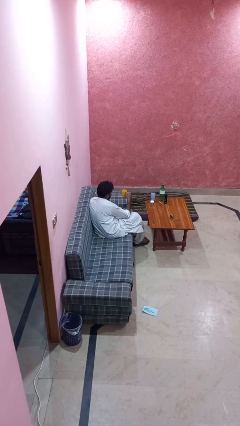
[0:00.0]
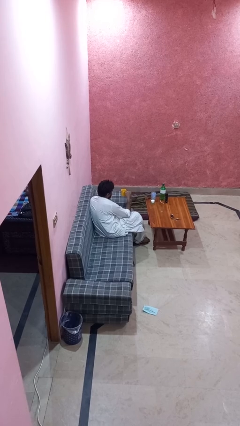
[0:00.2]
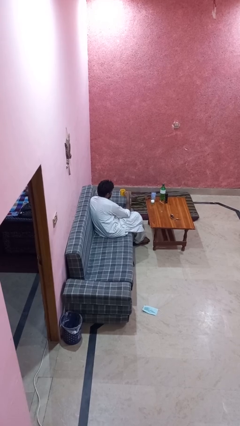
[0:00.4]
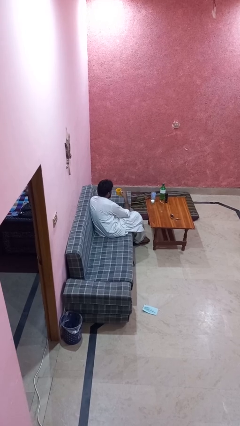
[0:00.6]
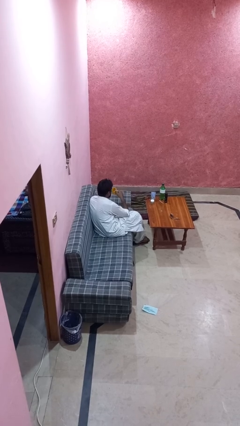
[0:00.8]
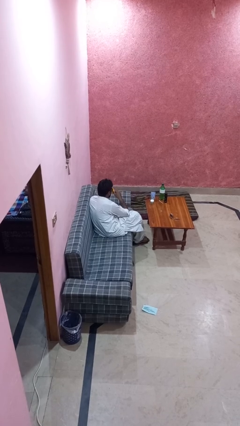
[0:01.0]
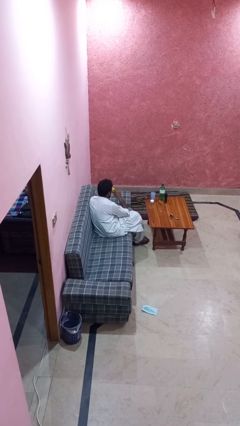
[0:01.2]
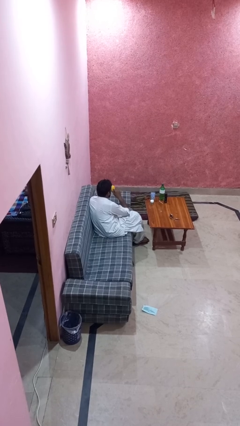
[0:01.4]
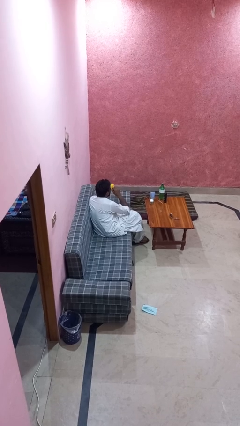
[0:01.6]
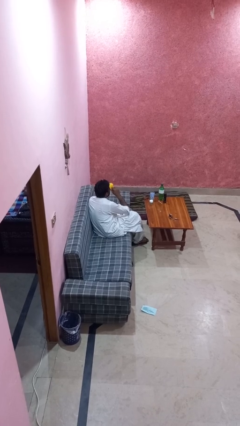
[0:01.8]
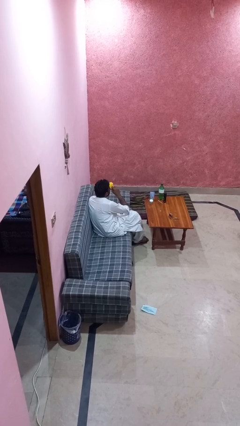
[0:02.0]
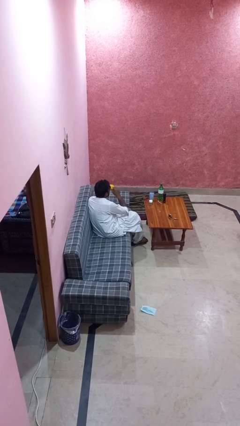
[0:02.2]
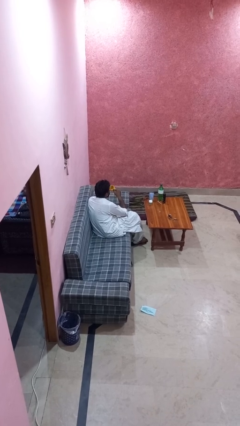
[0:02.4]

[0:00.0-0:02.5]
person drinks from mug

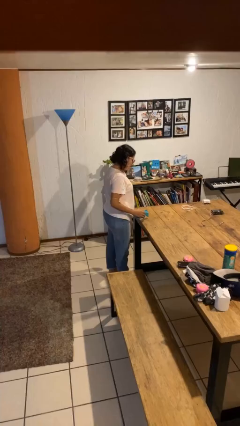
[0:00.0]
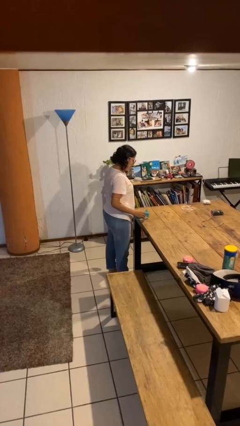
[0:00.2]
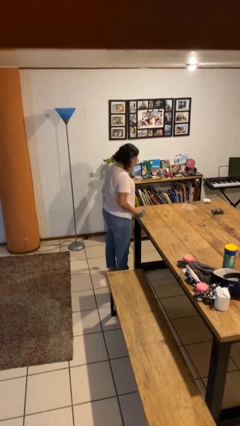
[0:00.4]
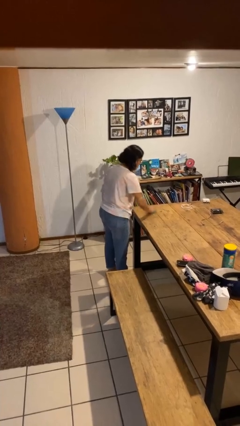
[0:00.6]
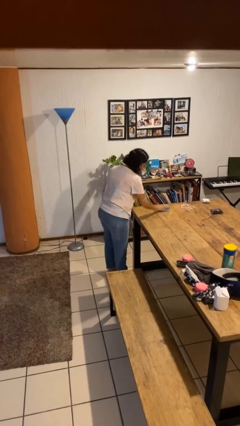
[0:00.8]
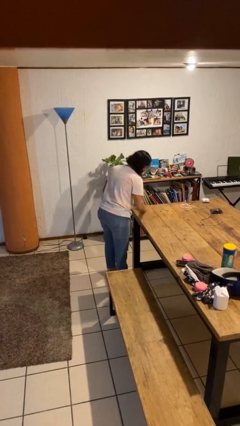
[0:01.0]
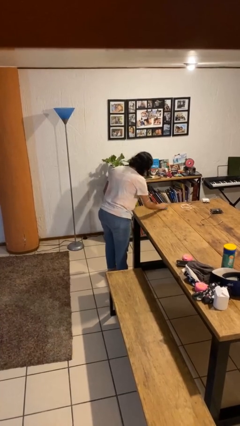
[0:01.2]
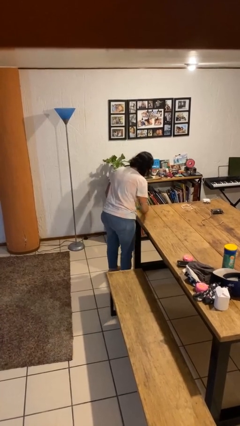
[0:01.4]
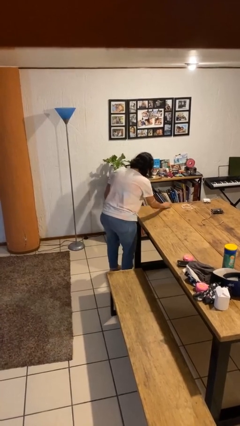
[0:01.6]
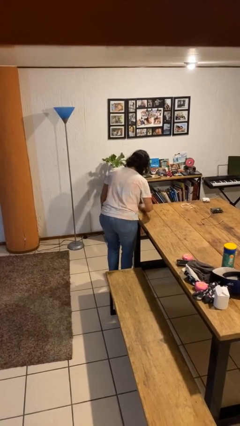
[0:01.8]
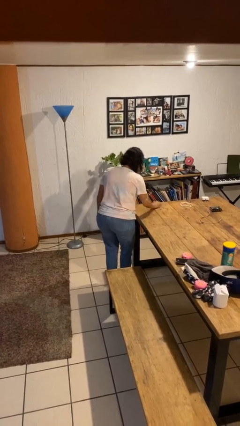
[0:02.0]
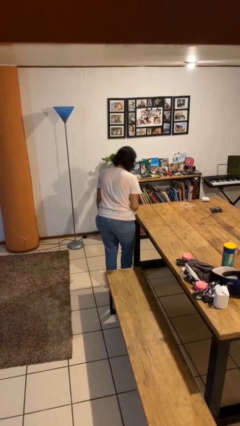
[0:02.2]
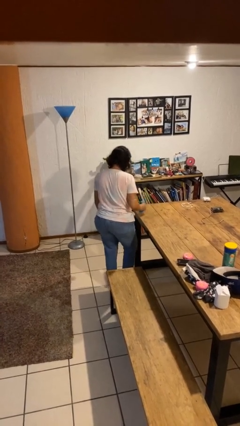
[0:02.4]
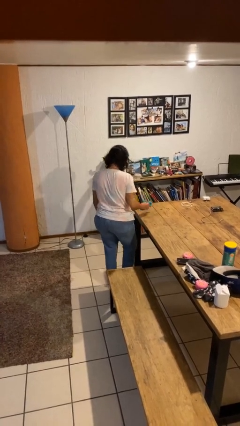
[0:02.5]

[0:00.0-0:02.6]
person cleans table with rag

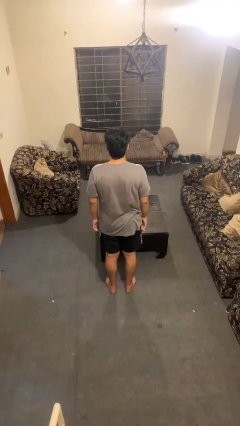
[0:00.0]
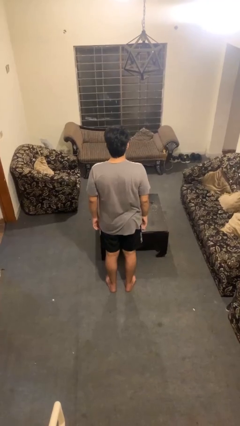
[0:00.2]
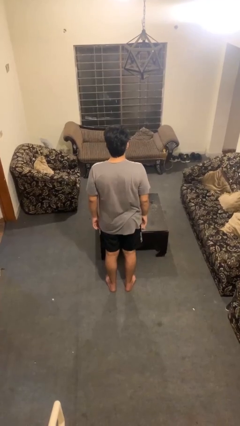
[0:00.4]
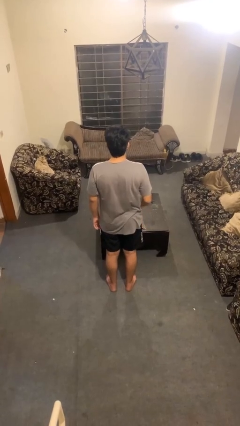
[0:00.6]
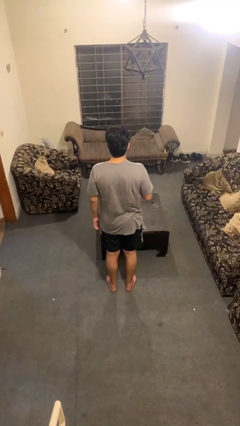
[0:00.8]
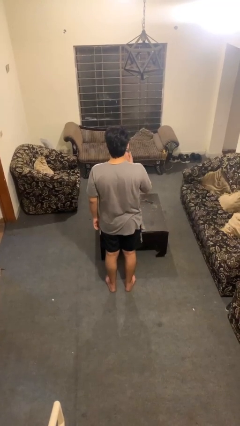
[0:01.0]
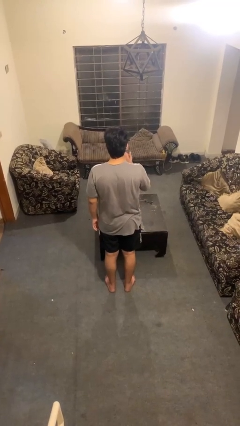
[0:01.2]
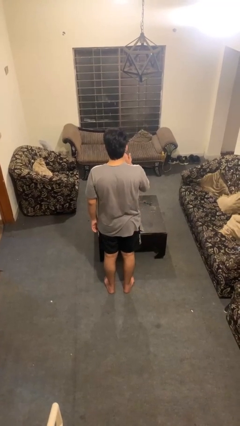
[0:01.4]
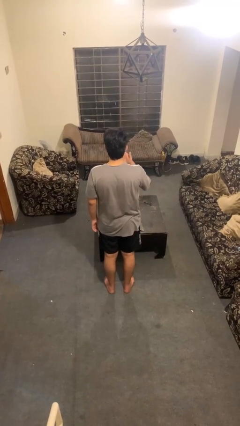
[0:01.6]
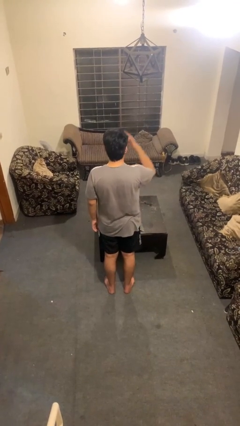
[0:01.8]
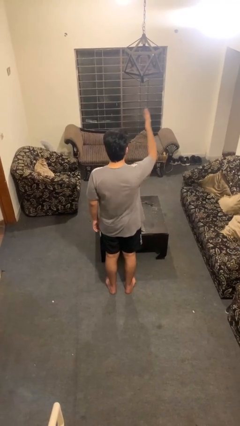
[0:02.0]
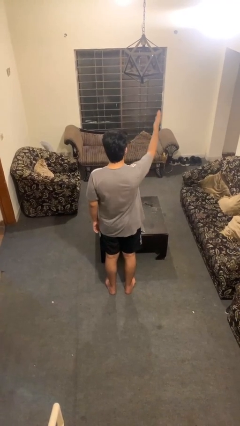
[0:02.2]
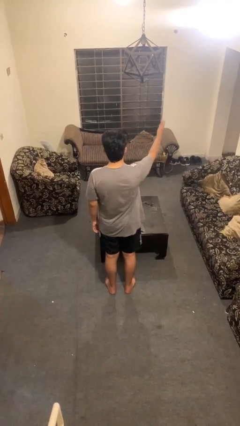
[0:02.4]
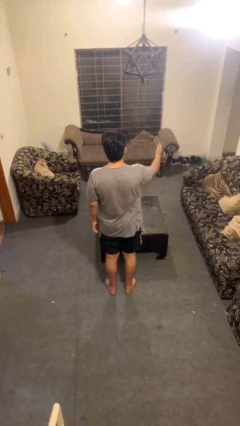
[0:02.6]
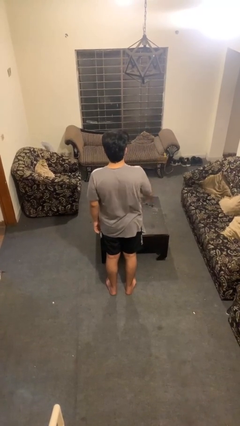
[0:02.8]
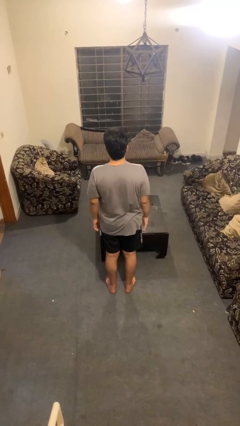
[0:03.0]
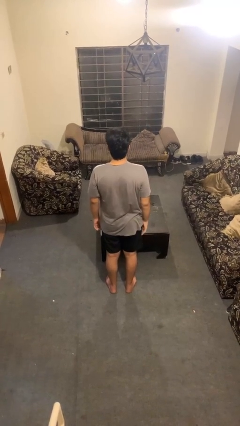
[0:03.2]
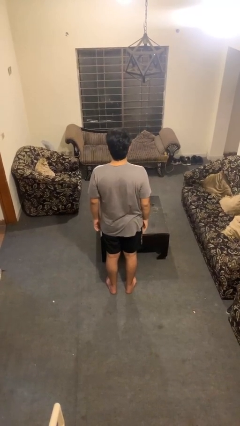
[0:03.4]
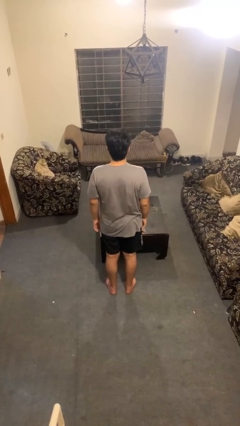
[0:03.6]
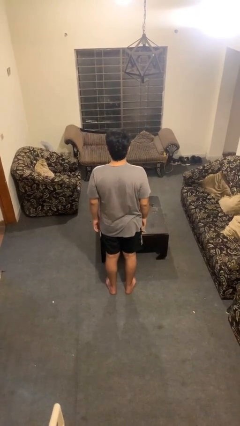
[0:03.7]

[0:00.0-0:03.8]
person gestures blow kiss

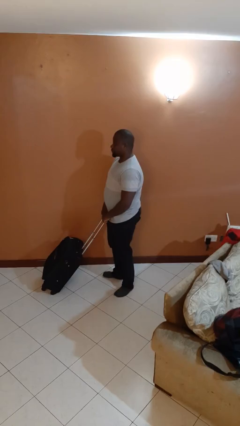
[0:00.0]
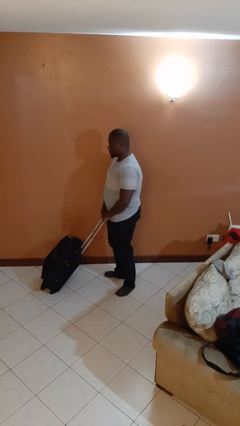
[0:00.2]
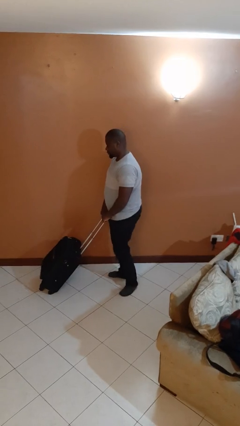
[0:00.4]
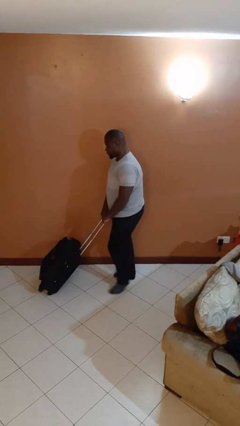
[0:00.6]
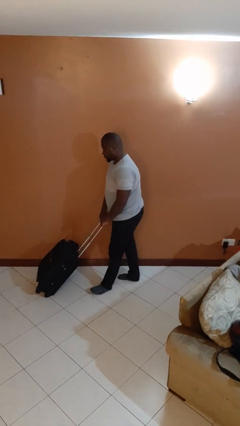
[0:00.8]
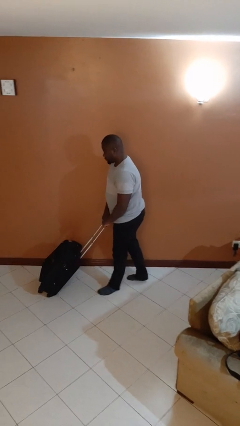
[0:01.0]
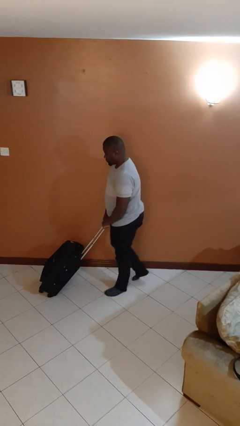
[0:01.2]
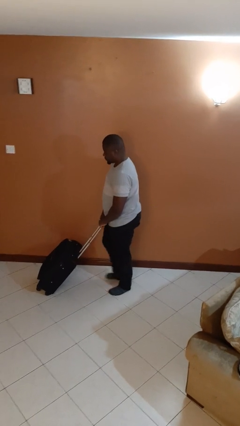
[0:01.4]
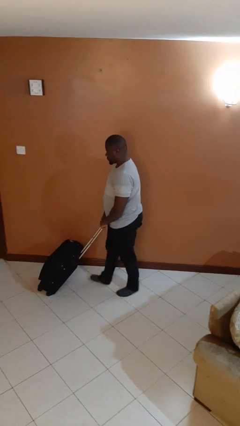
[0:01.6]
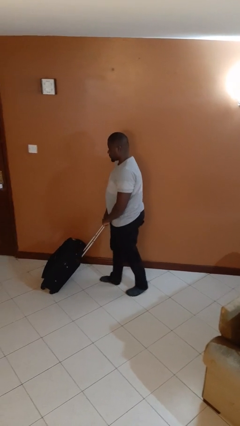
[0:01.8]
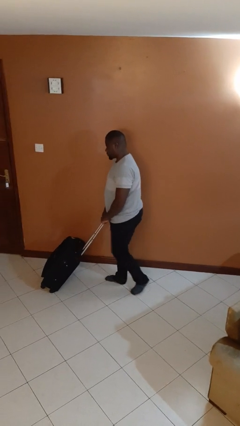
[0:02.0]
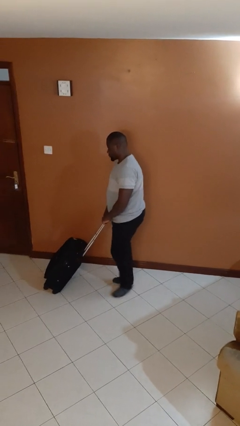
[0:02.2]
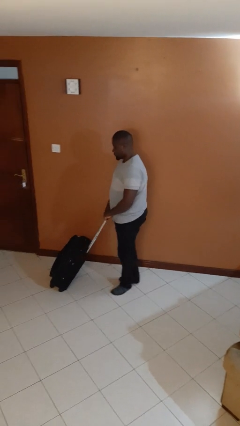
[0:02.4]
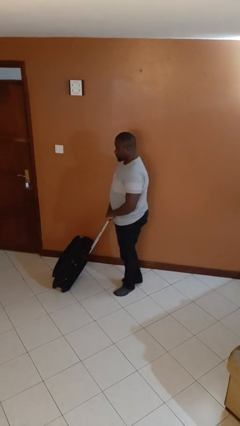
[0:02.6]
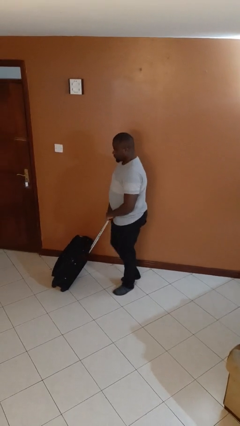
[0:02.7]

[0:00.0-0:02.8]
person pushes wheeled cart

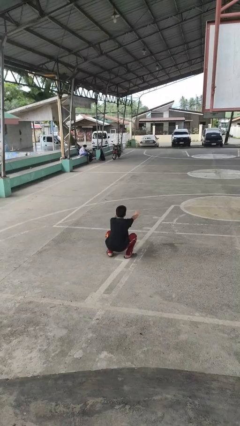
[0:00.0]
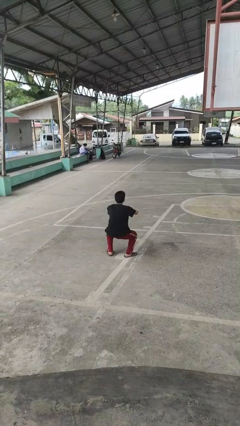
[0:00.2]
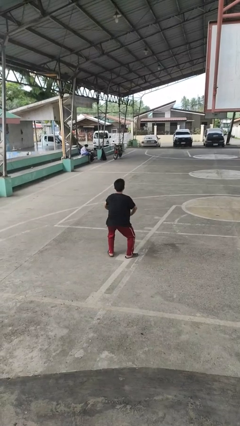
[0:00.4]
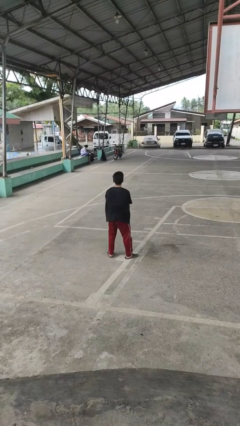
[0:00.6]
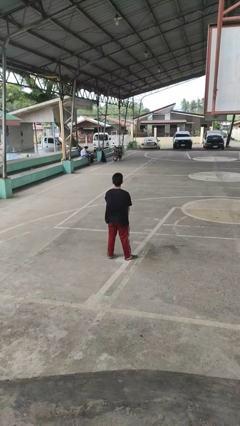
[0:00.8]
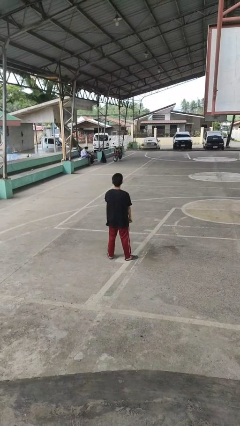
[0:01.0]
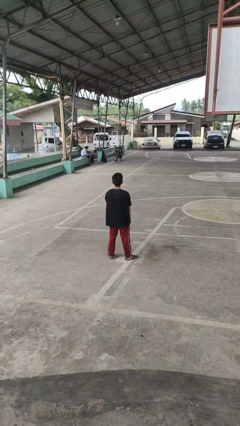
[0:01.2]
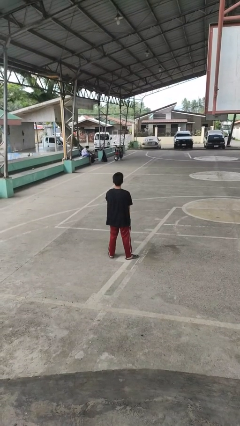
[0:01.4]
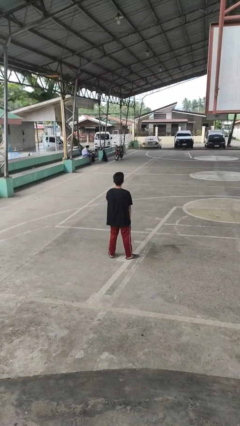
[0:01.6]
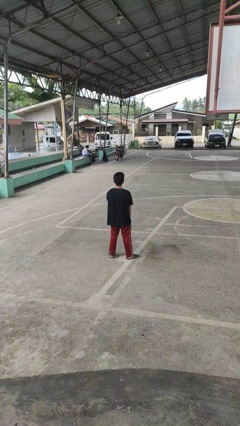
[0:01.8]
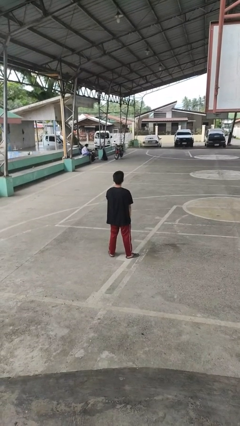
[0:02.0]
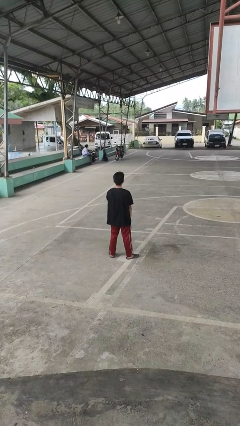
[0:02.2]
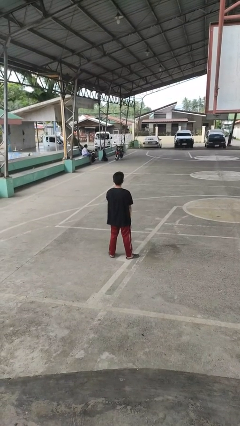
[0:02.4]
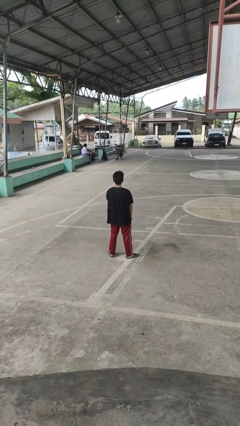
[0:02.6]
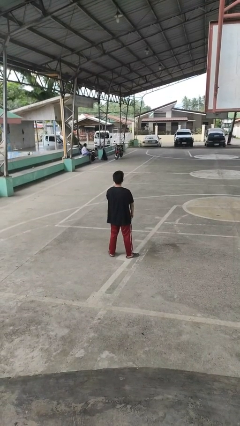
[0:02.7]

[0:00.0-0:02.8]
person stands up

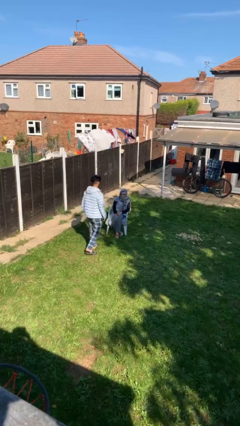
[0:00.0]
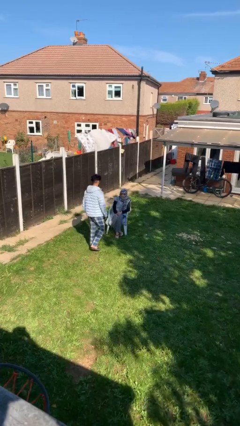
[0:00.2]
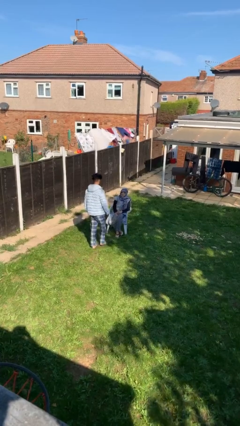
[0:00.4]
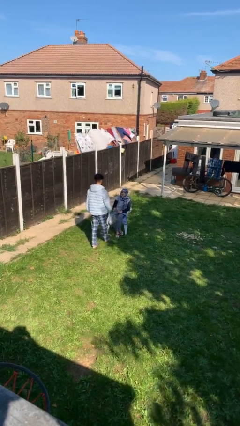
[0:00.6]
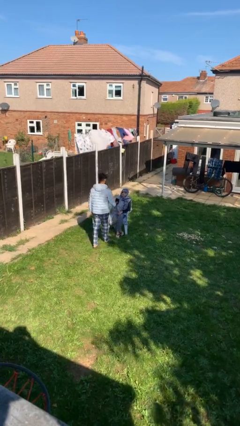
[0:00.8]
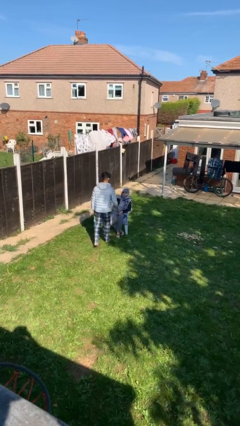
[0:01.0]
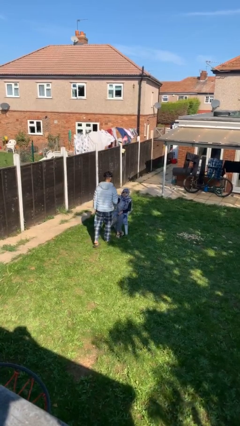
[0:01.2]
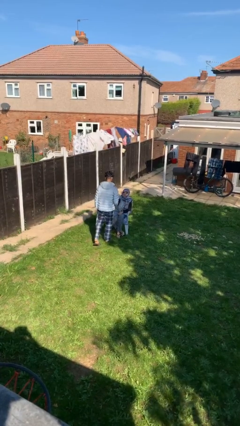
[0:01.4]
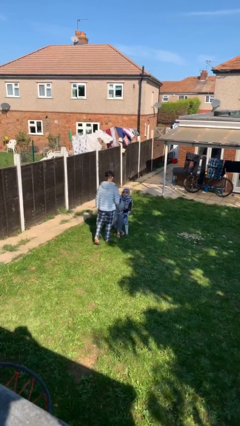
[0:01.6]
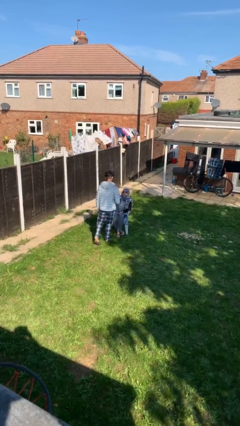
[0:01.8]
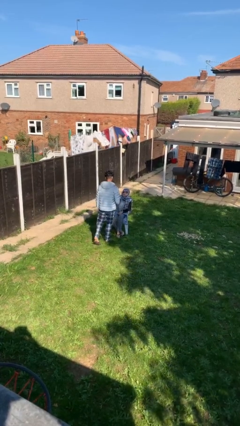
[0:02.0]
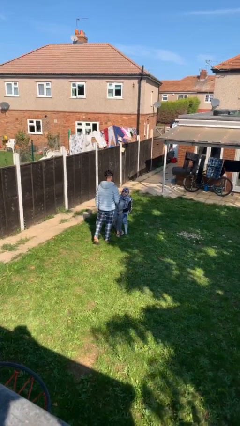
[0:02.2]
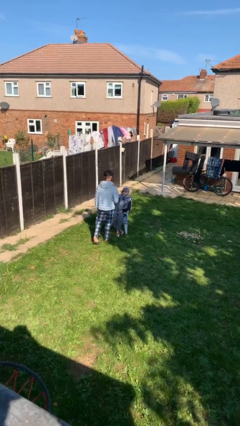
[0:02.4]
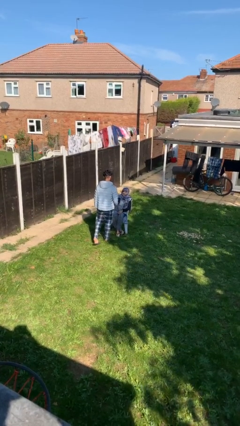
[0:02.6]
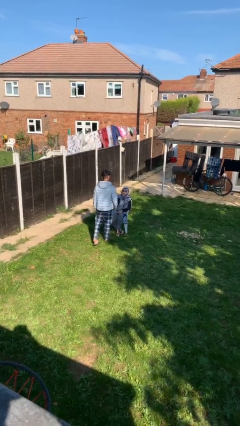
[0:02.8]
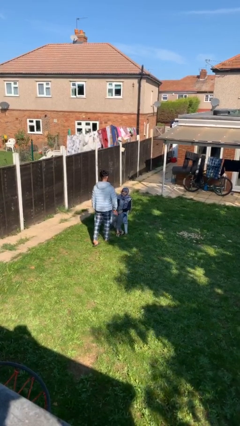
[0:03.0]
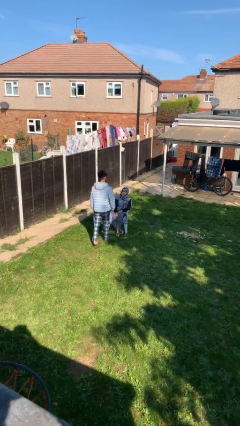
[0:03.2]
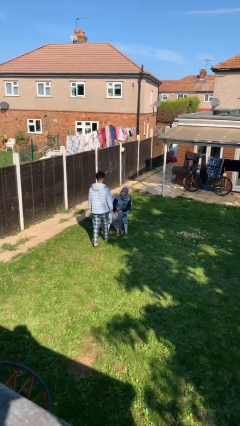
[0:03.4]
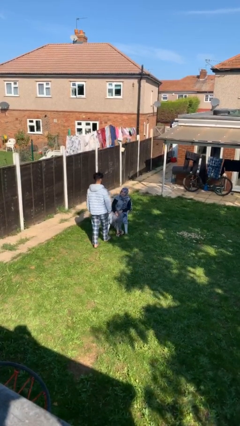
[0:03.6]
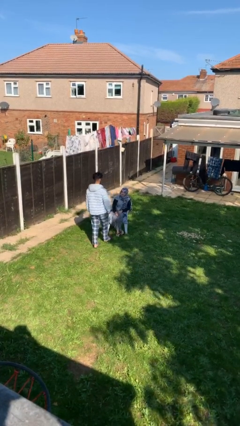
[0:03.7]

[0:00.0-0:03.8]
person shakes hand
